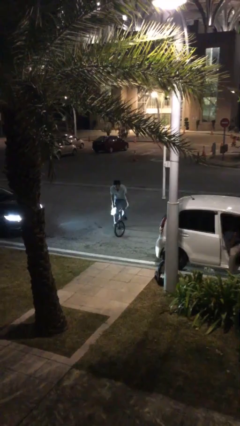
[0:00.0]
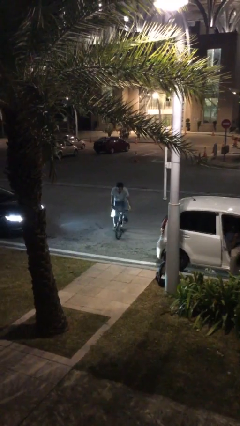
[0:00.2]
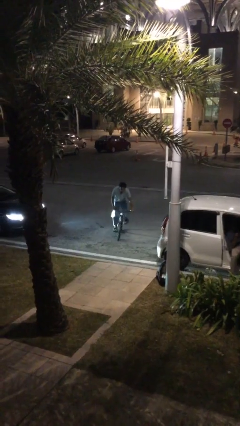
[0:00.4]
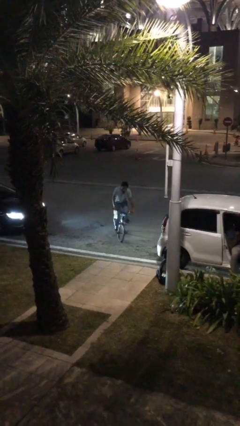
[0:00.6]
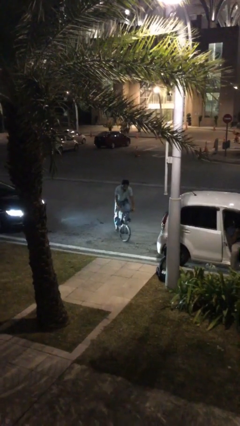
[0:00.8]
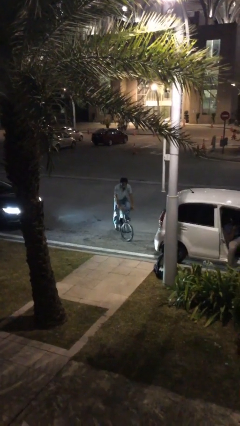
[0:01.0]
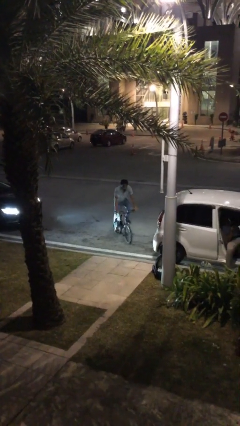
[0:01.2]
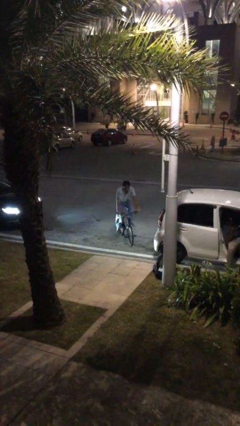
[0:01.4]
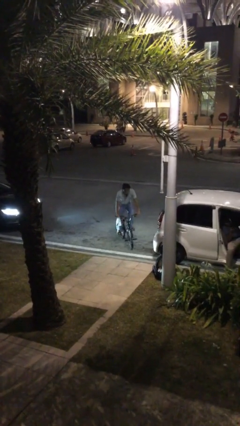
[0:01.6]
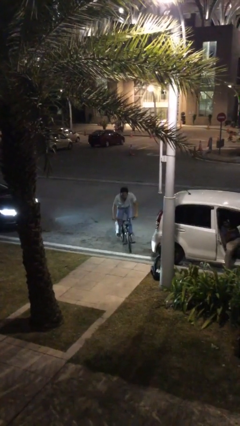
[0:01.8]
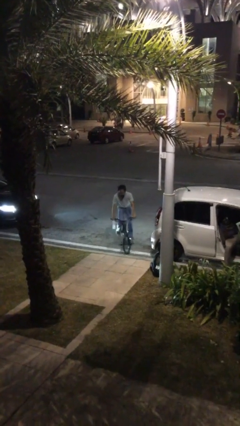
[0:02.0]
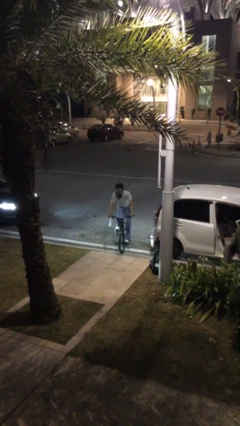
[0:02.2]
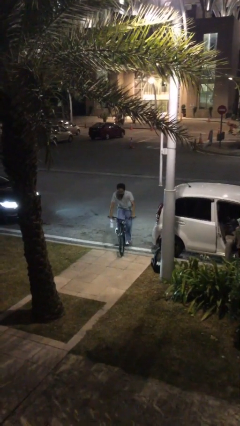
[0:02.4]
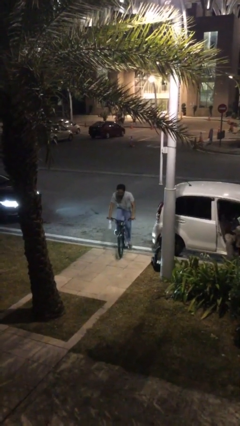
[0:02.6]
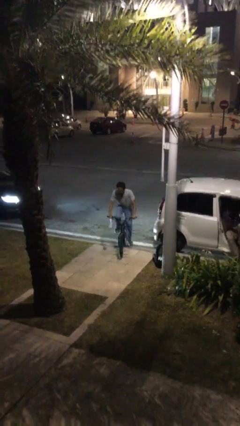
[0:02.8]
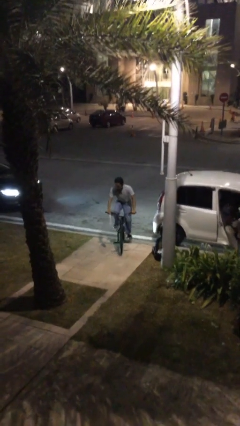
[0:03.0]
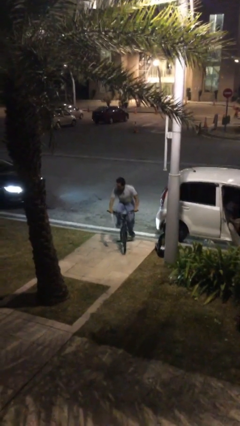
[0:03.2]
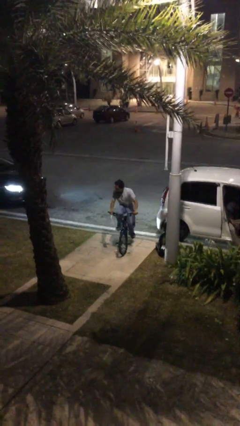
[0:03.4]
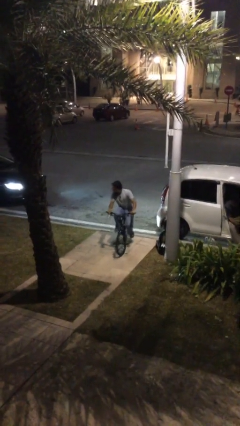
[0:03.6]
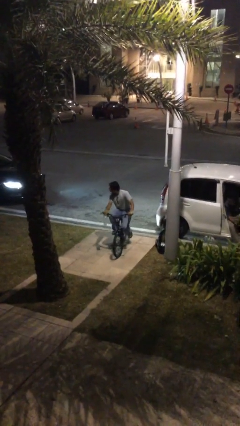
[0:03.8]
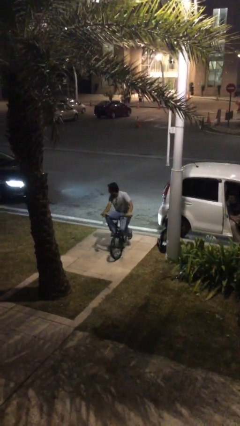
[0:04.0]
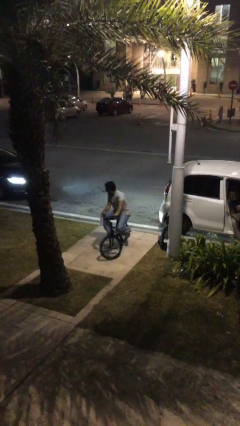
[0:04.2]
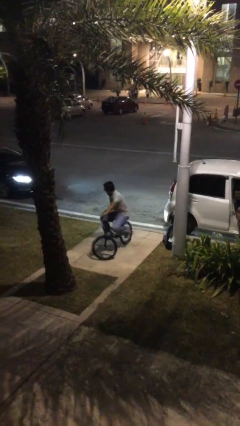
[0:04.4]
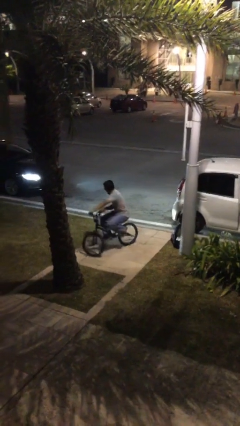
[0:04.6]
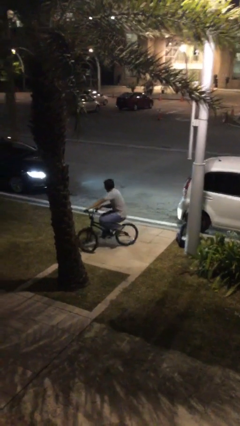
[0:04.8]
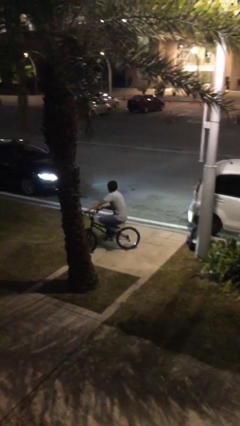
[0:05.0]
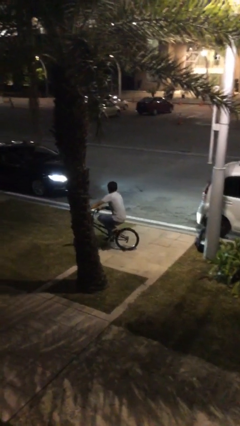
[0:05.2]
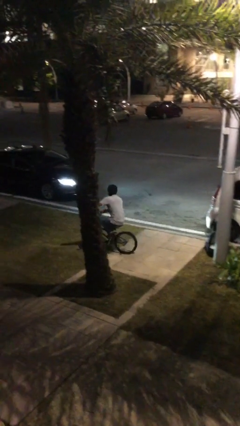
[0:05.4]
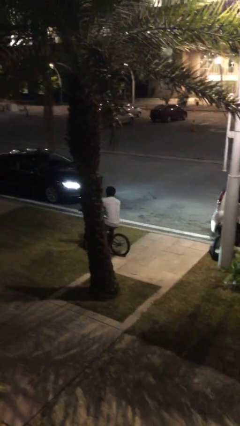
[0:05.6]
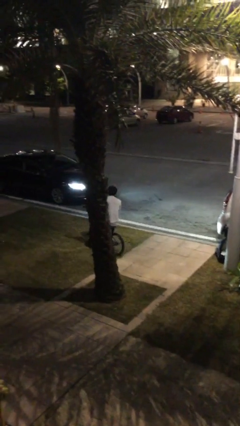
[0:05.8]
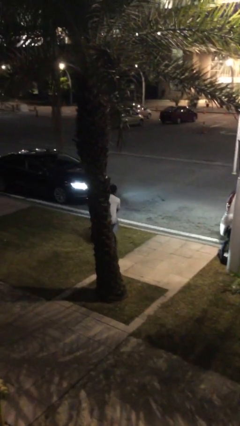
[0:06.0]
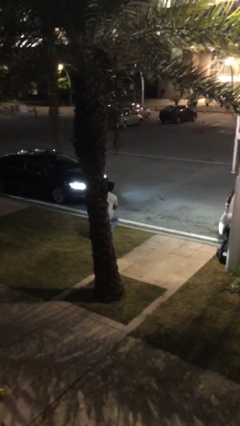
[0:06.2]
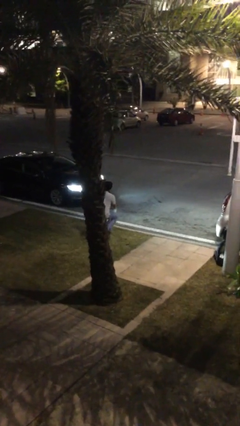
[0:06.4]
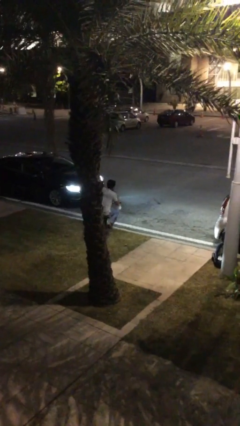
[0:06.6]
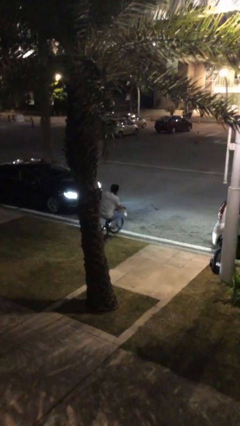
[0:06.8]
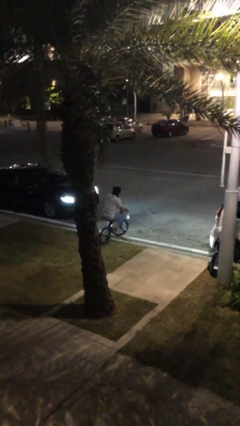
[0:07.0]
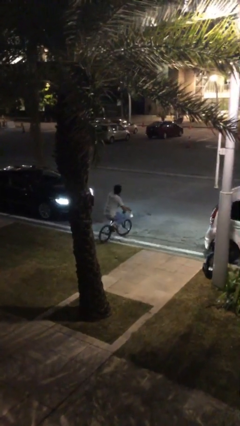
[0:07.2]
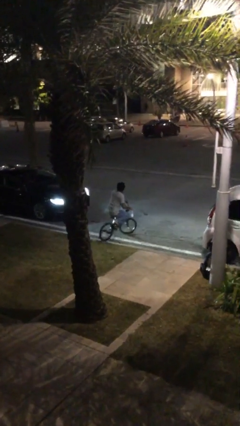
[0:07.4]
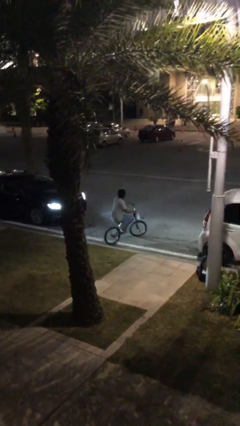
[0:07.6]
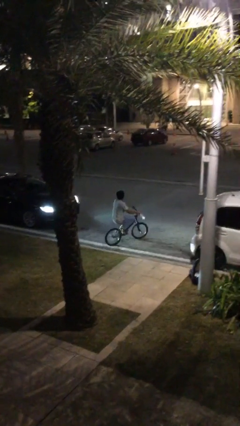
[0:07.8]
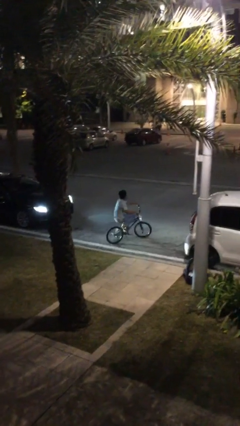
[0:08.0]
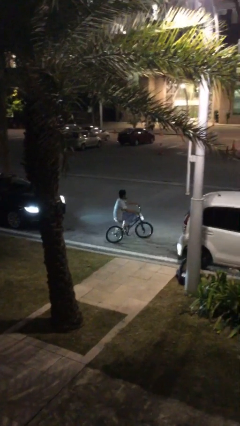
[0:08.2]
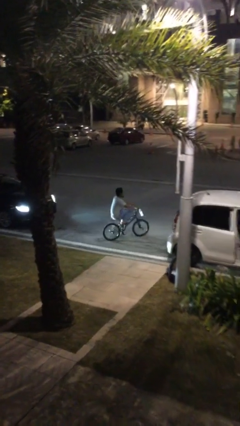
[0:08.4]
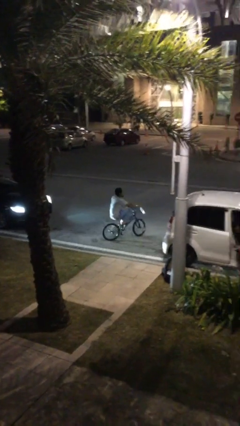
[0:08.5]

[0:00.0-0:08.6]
person rides bicycle

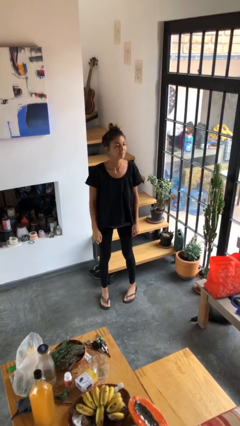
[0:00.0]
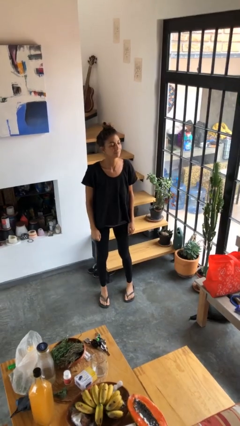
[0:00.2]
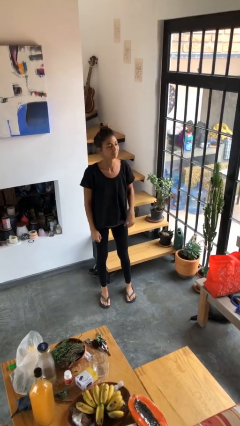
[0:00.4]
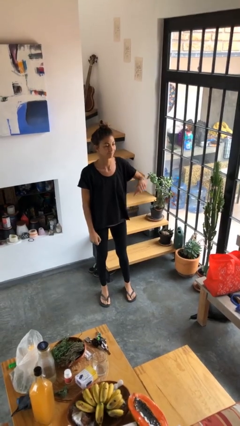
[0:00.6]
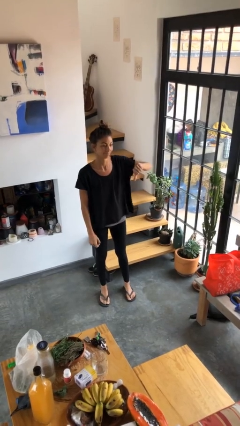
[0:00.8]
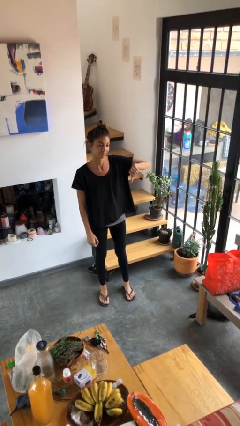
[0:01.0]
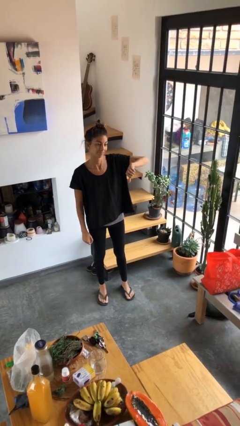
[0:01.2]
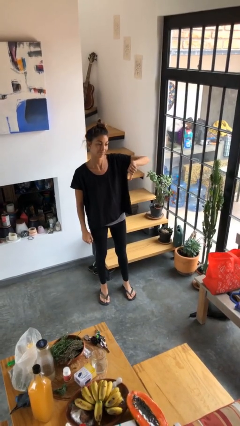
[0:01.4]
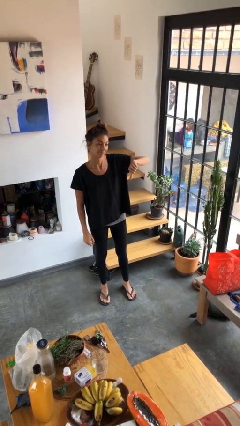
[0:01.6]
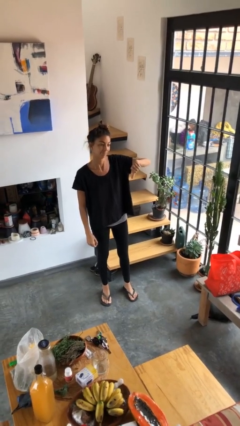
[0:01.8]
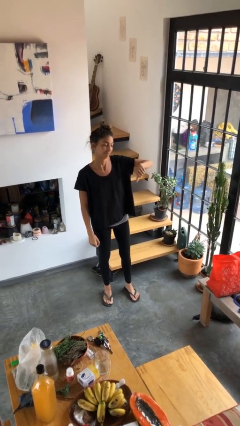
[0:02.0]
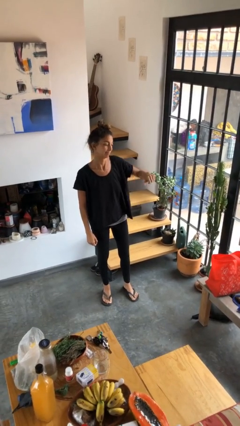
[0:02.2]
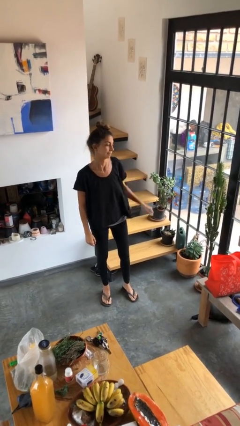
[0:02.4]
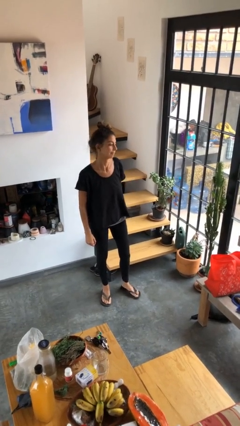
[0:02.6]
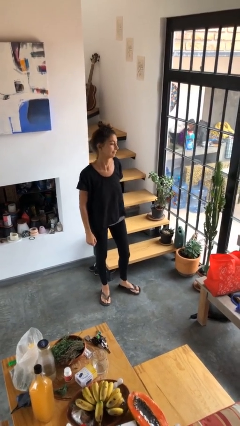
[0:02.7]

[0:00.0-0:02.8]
person gestures thumbs down

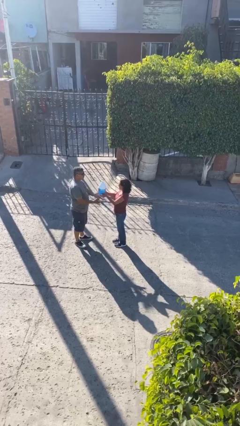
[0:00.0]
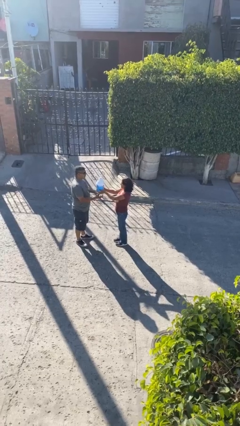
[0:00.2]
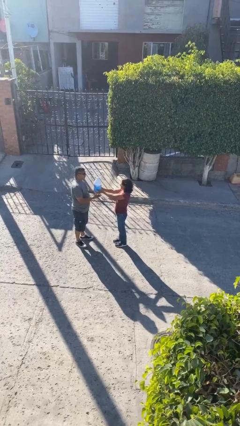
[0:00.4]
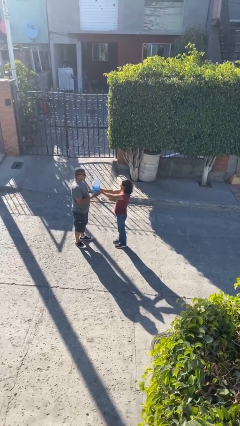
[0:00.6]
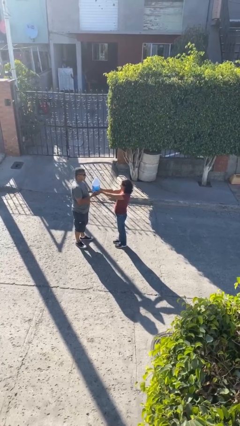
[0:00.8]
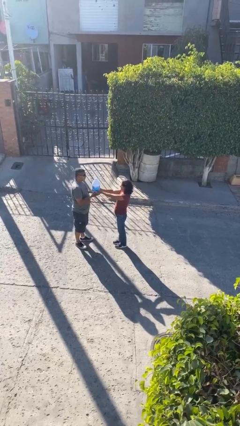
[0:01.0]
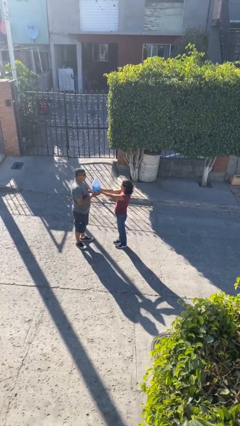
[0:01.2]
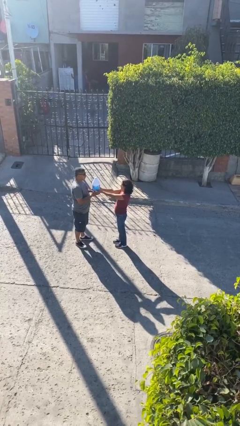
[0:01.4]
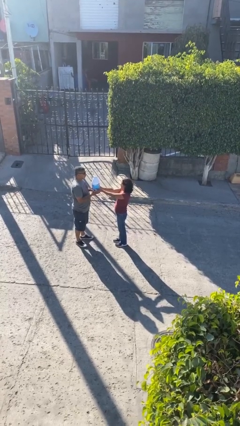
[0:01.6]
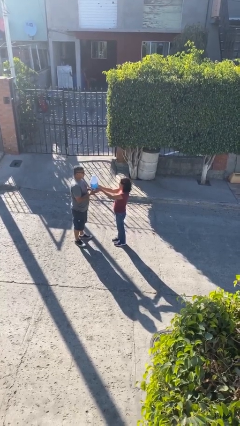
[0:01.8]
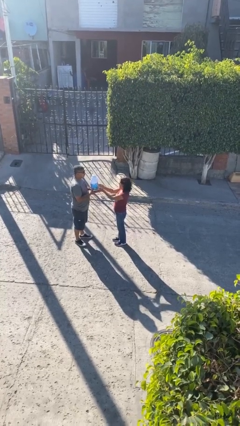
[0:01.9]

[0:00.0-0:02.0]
person transfers object to person

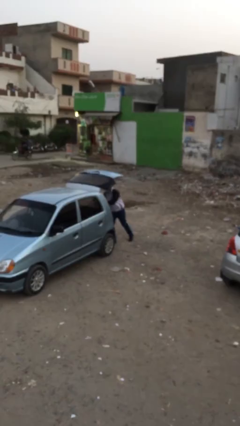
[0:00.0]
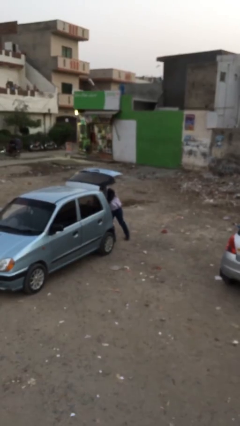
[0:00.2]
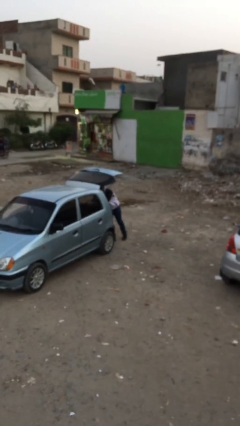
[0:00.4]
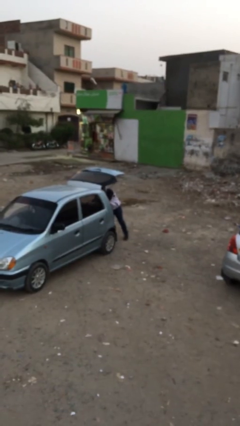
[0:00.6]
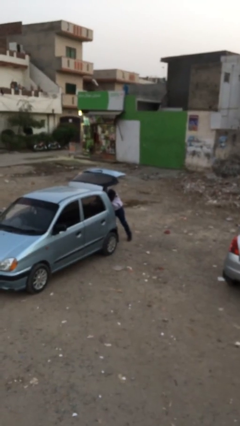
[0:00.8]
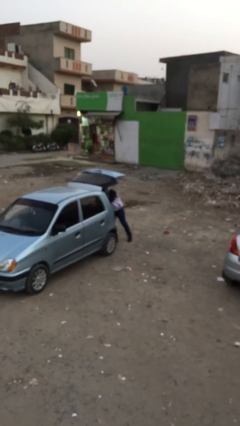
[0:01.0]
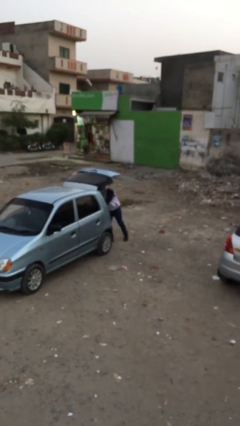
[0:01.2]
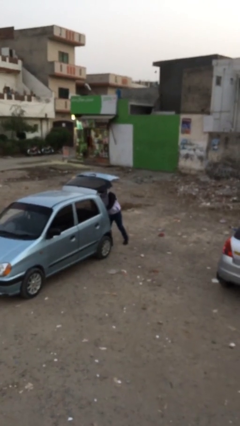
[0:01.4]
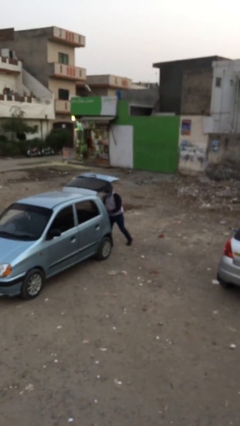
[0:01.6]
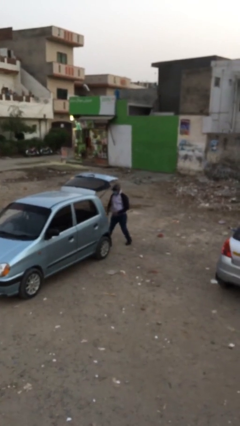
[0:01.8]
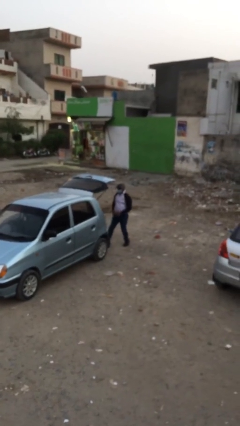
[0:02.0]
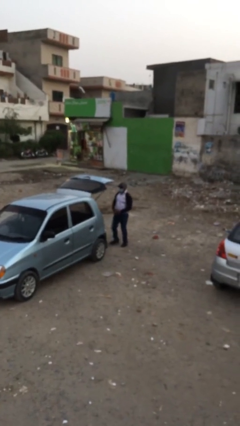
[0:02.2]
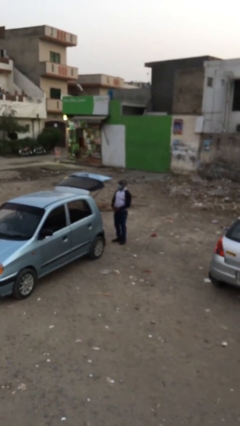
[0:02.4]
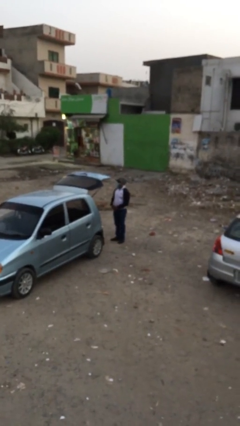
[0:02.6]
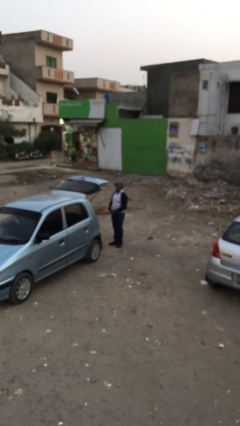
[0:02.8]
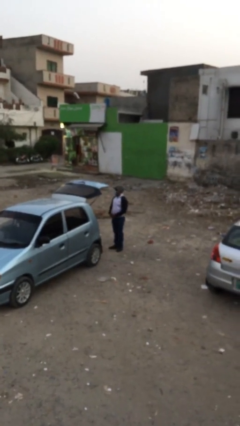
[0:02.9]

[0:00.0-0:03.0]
person loads car

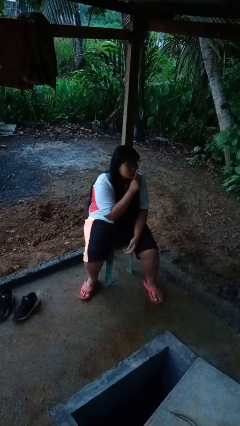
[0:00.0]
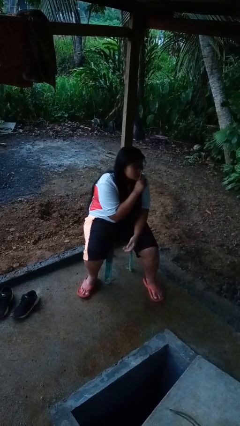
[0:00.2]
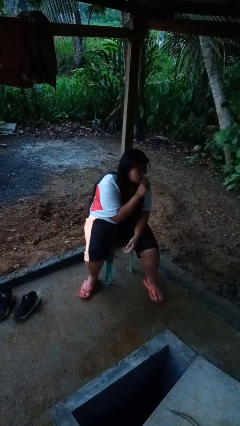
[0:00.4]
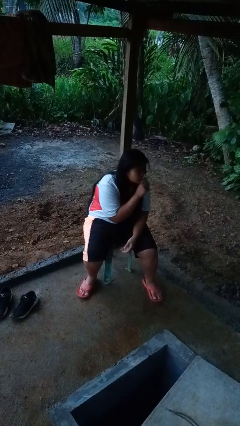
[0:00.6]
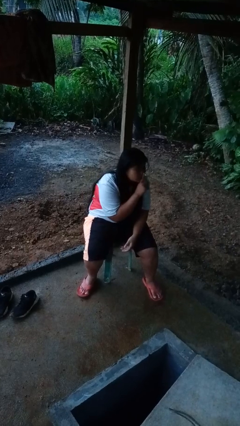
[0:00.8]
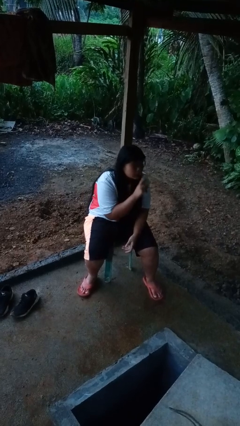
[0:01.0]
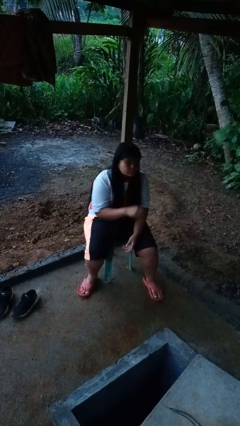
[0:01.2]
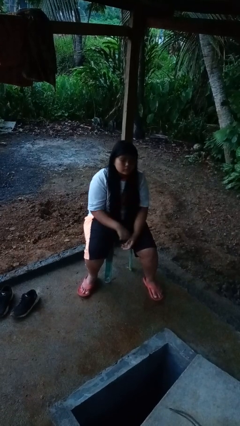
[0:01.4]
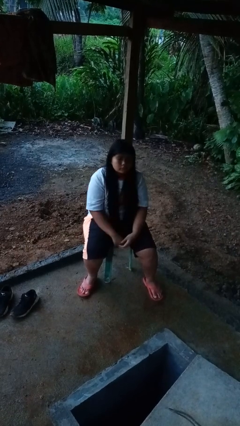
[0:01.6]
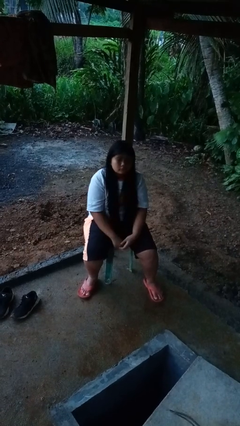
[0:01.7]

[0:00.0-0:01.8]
person gestures be quiet
